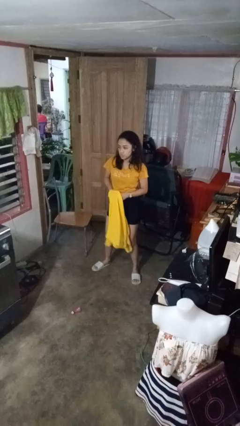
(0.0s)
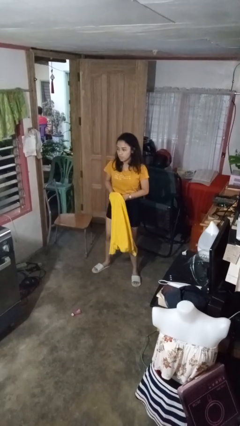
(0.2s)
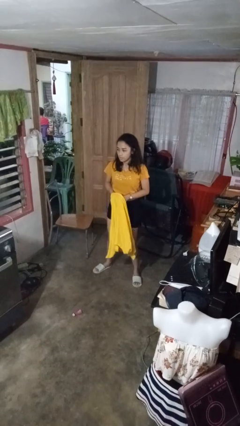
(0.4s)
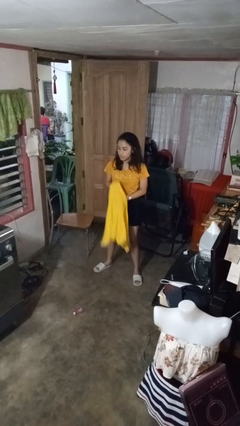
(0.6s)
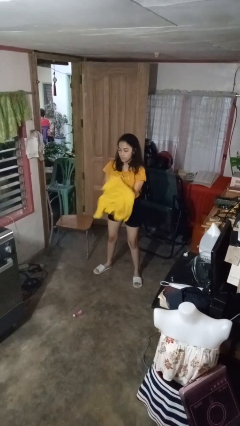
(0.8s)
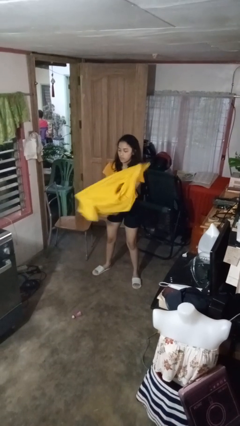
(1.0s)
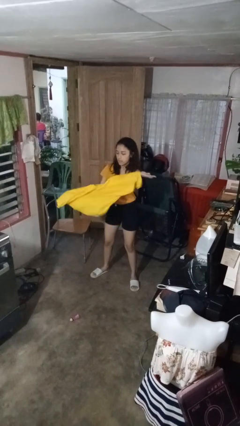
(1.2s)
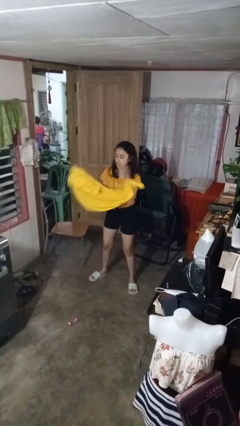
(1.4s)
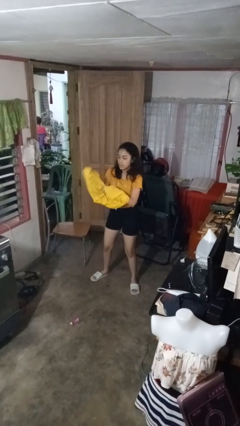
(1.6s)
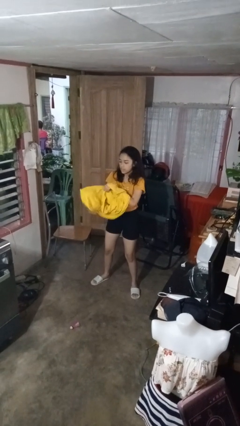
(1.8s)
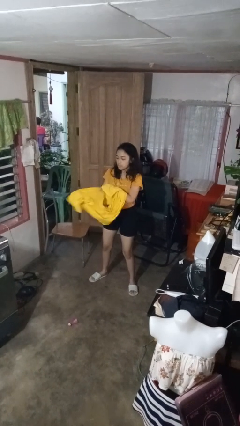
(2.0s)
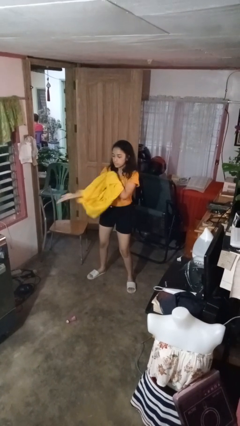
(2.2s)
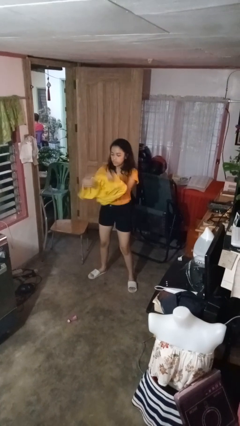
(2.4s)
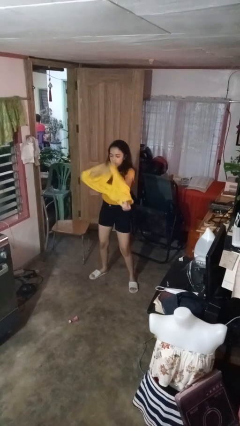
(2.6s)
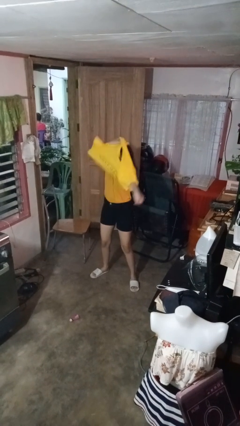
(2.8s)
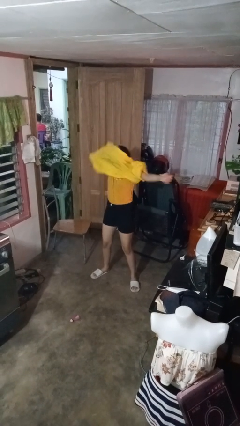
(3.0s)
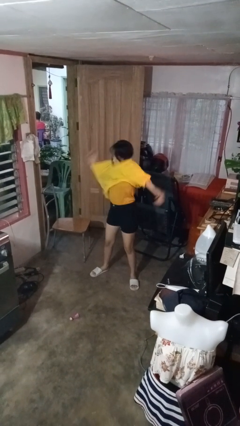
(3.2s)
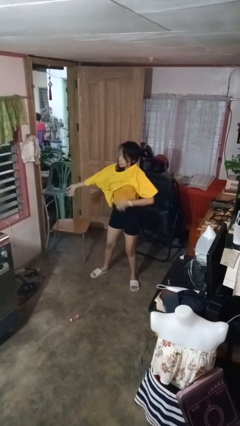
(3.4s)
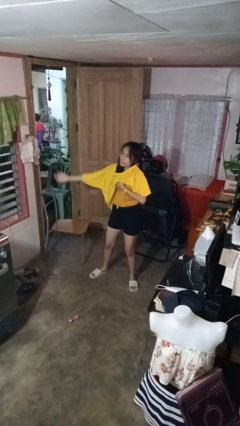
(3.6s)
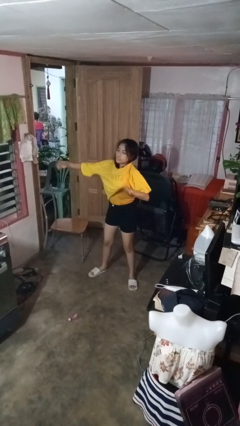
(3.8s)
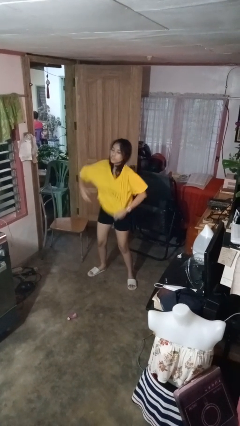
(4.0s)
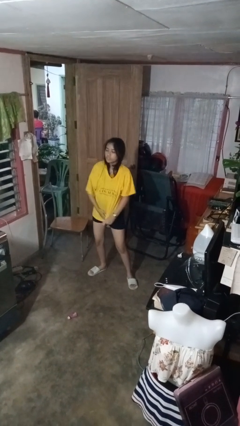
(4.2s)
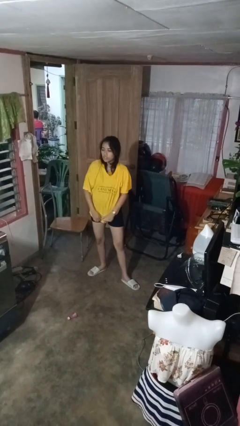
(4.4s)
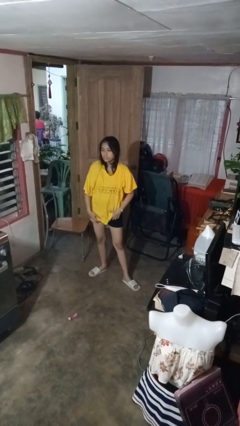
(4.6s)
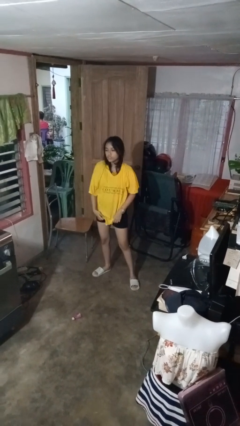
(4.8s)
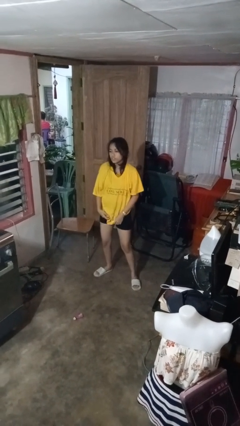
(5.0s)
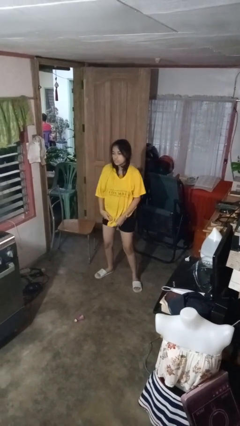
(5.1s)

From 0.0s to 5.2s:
person puts on shirt

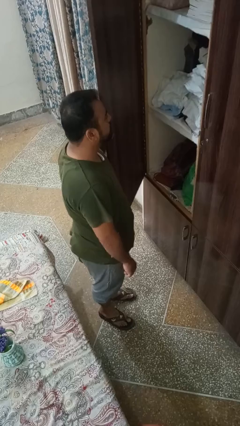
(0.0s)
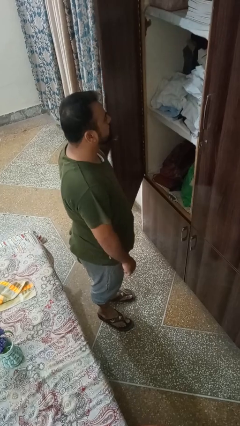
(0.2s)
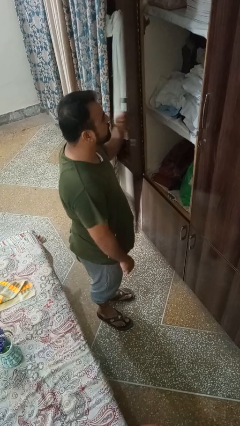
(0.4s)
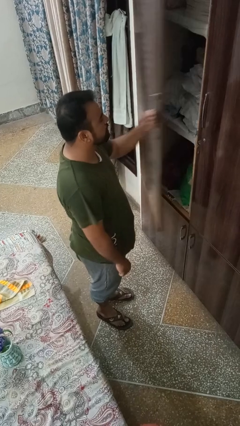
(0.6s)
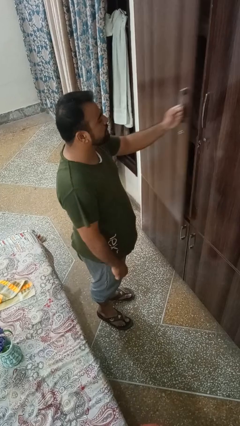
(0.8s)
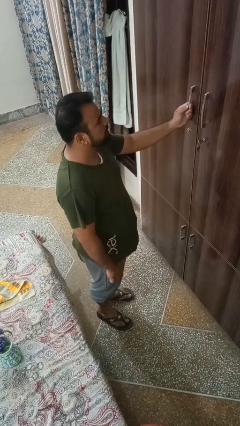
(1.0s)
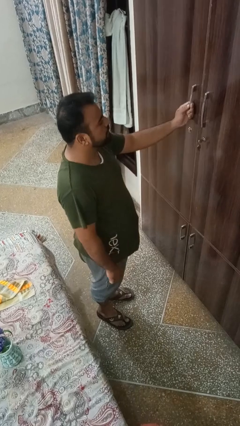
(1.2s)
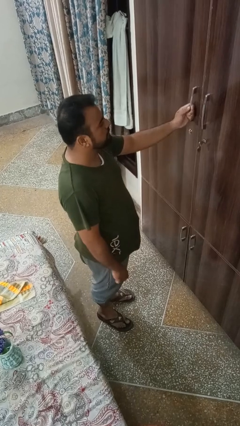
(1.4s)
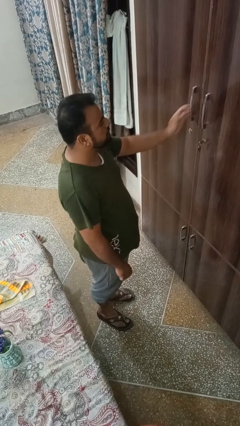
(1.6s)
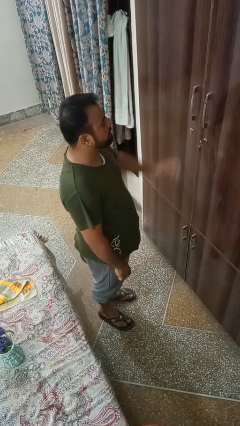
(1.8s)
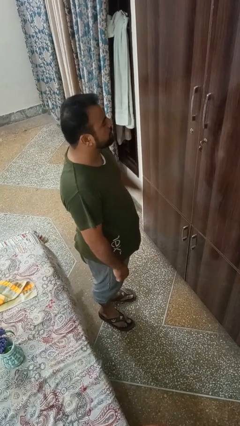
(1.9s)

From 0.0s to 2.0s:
person closes closet door

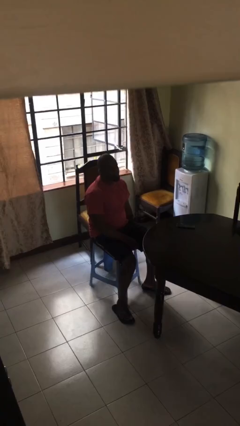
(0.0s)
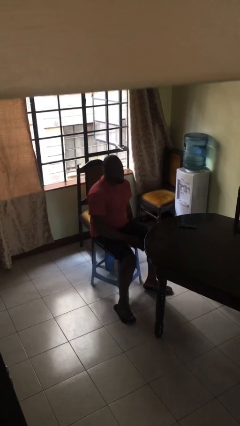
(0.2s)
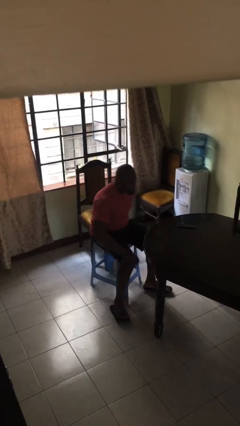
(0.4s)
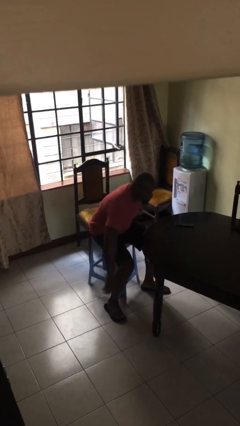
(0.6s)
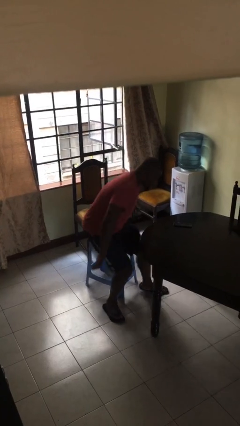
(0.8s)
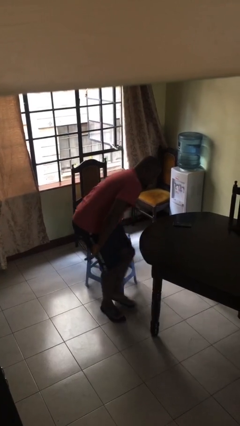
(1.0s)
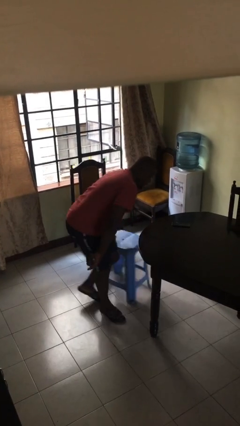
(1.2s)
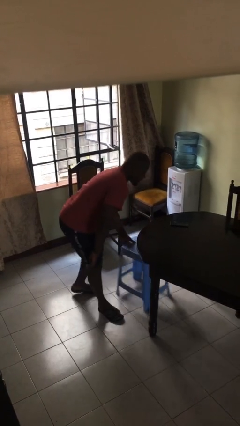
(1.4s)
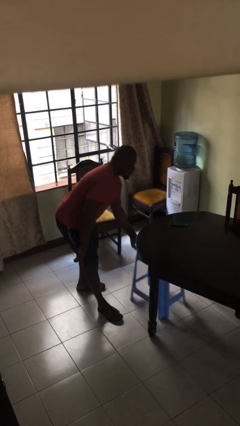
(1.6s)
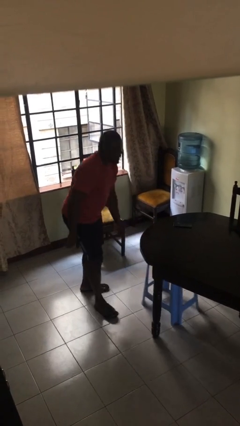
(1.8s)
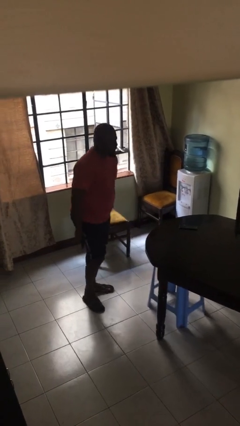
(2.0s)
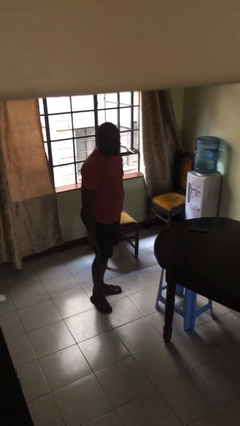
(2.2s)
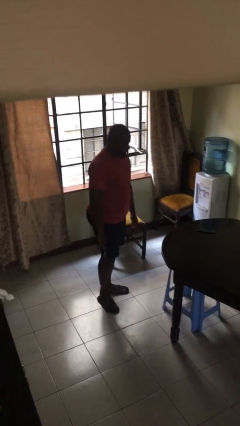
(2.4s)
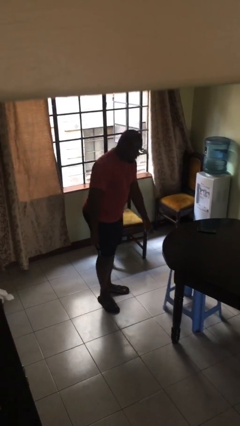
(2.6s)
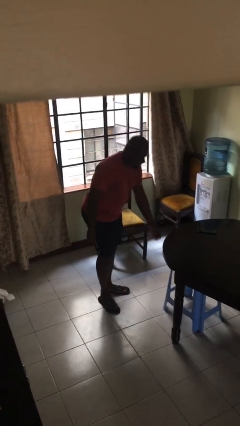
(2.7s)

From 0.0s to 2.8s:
person stands up

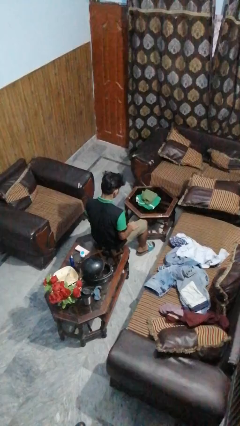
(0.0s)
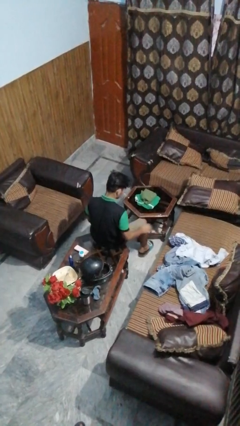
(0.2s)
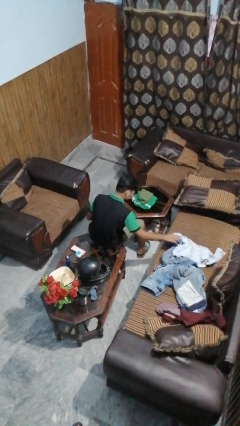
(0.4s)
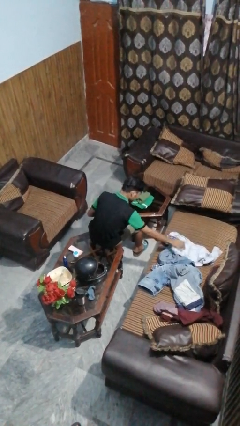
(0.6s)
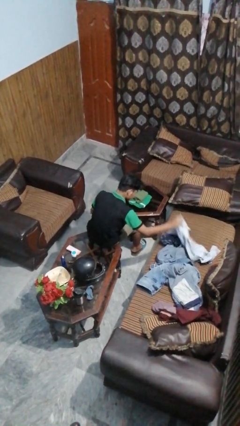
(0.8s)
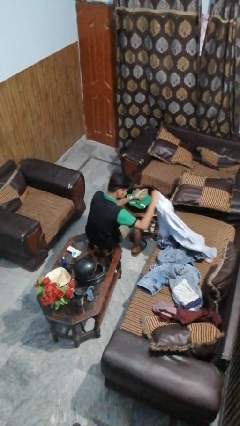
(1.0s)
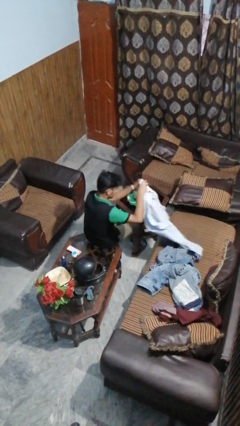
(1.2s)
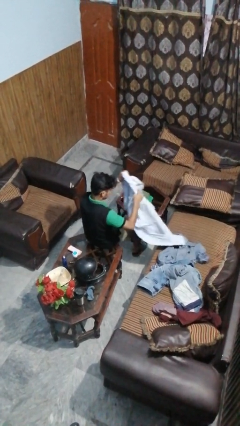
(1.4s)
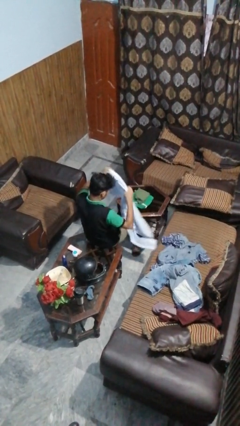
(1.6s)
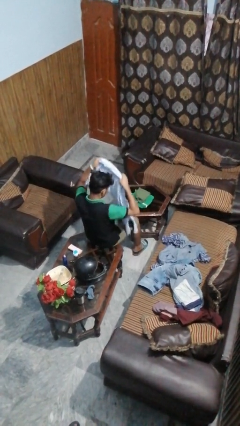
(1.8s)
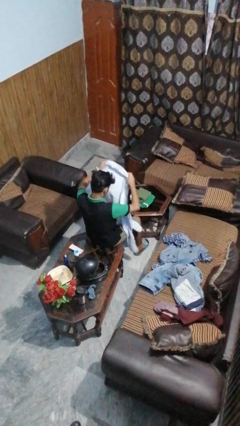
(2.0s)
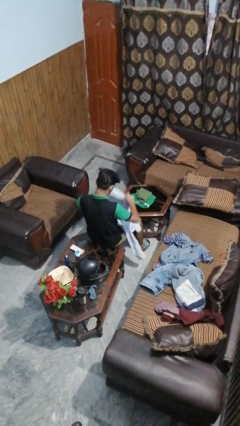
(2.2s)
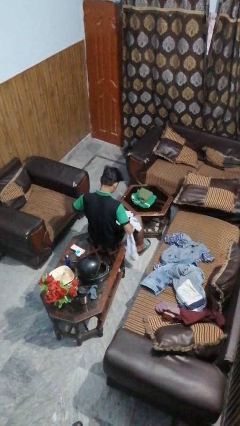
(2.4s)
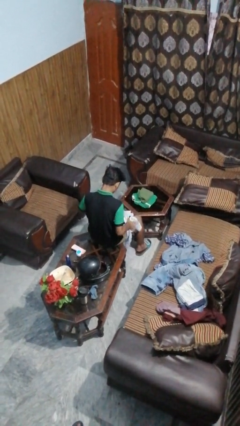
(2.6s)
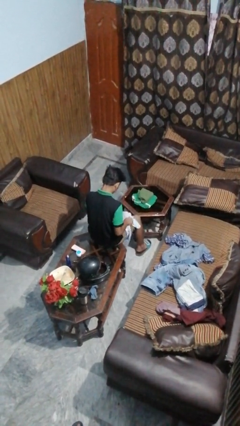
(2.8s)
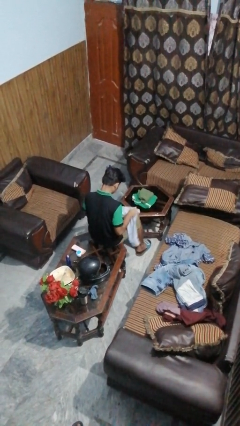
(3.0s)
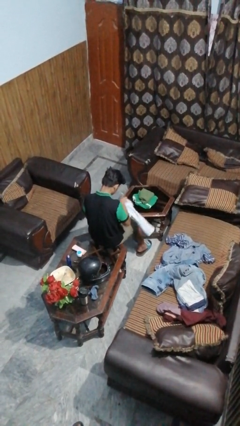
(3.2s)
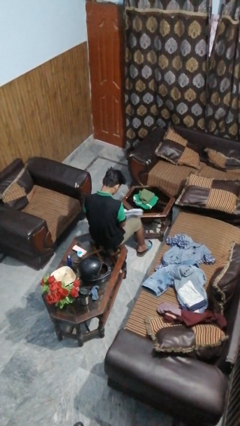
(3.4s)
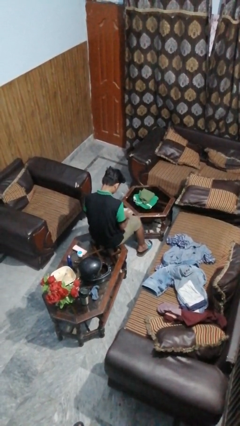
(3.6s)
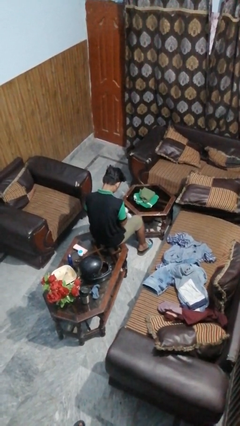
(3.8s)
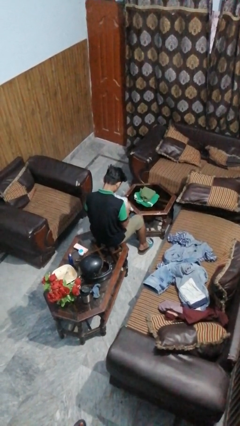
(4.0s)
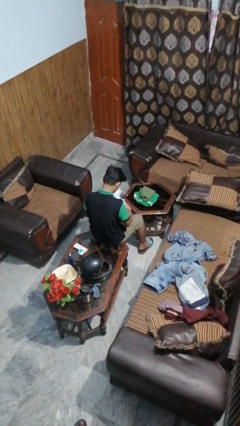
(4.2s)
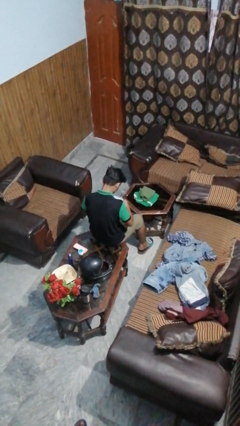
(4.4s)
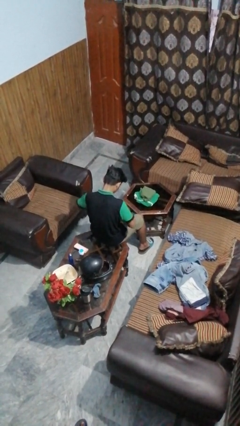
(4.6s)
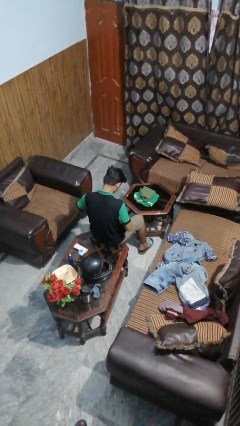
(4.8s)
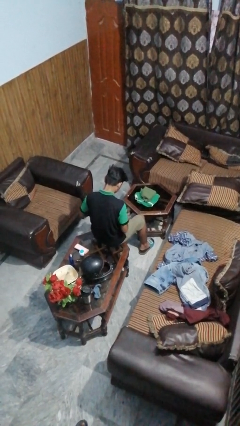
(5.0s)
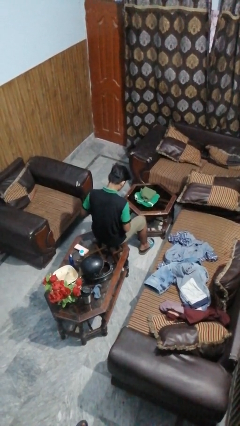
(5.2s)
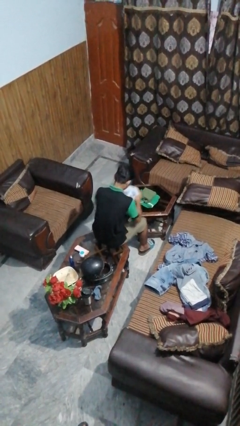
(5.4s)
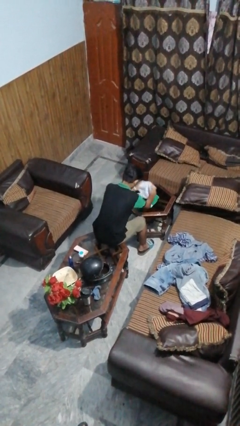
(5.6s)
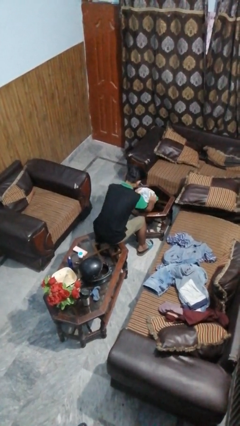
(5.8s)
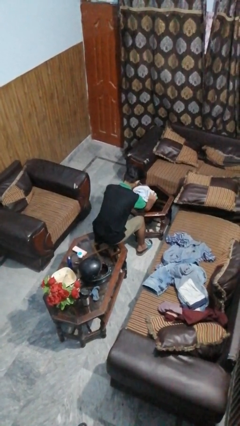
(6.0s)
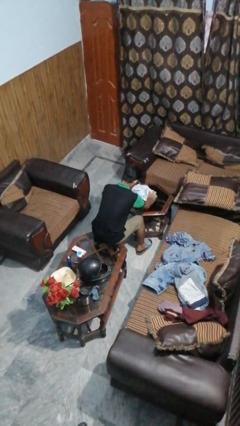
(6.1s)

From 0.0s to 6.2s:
person folds shirt

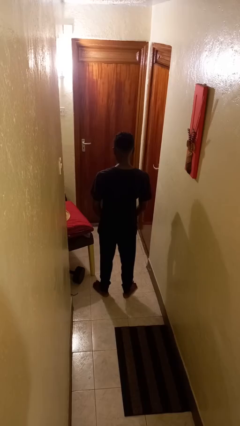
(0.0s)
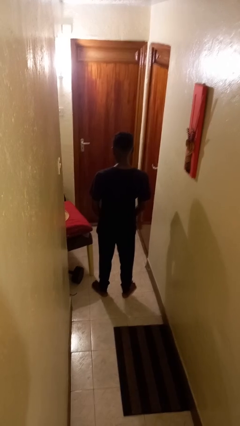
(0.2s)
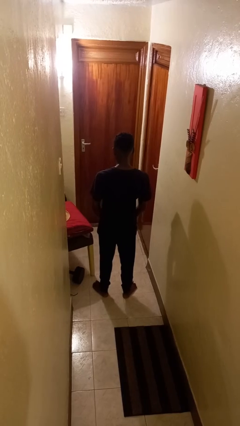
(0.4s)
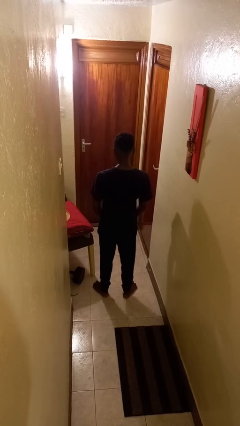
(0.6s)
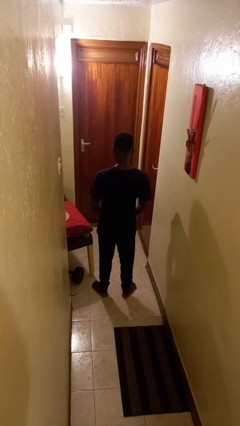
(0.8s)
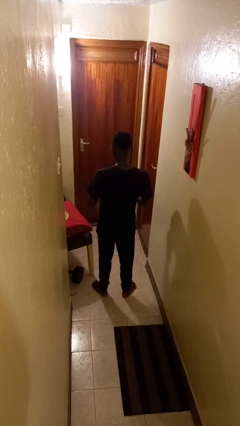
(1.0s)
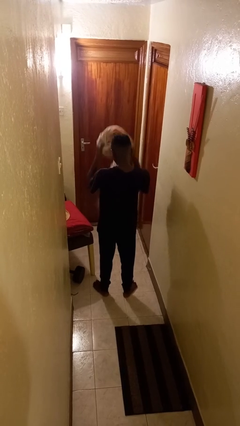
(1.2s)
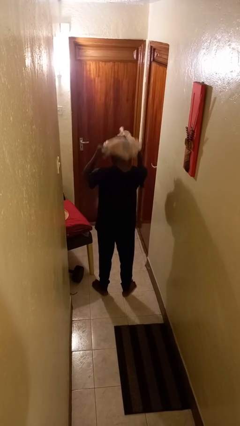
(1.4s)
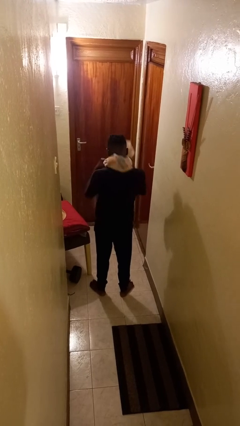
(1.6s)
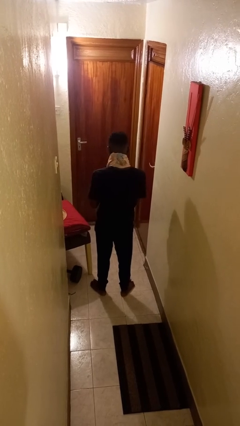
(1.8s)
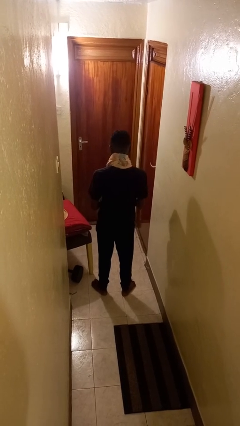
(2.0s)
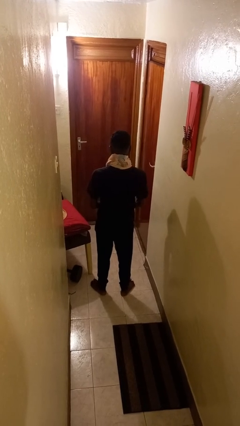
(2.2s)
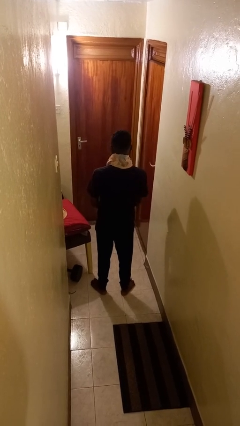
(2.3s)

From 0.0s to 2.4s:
person puts on scarf
